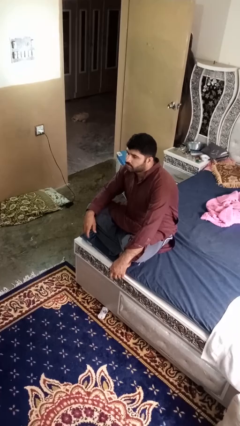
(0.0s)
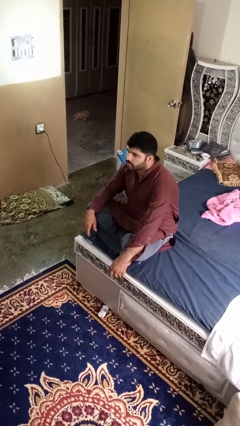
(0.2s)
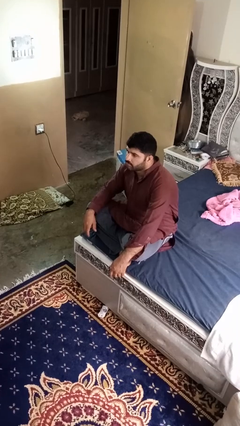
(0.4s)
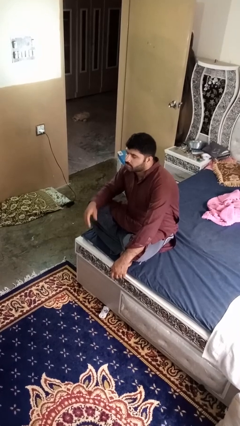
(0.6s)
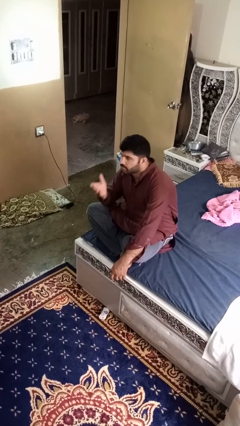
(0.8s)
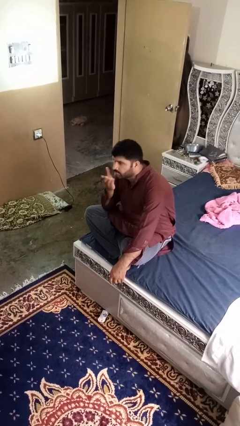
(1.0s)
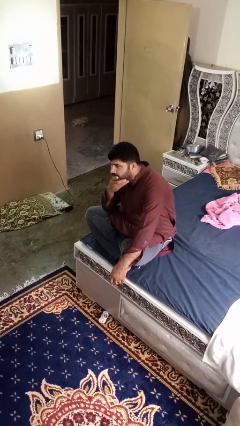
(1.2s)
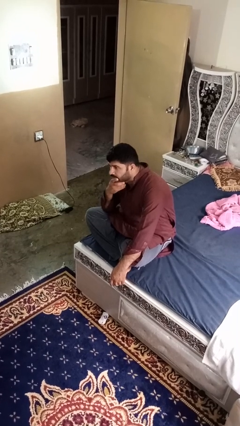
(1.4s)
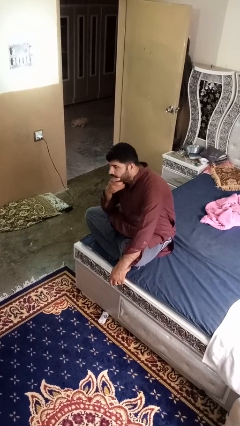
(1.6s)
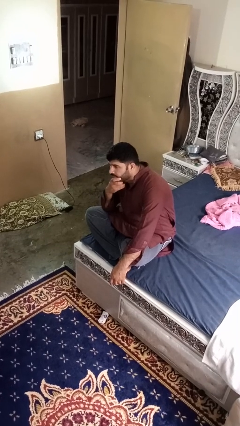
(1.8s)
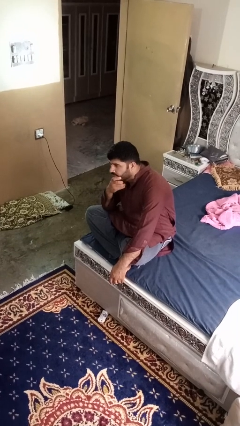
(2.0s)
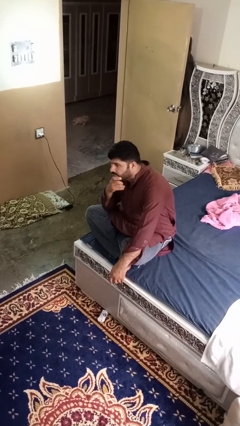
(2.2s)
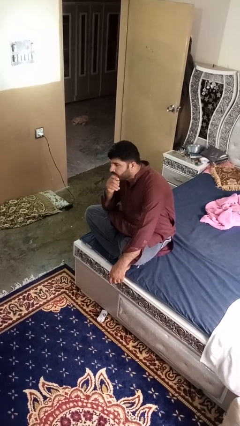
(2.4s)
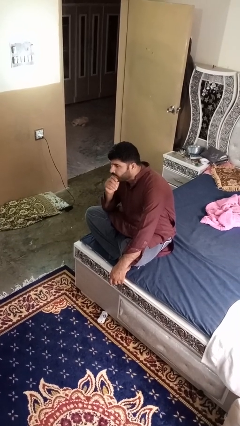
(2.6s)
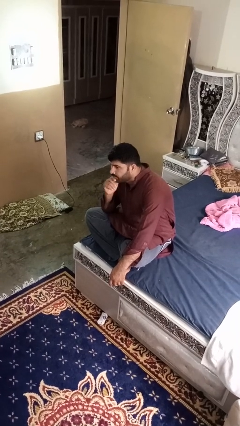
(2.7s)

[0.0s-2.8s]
person strokes chin

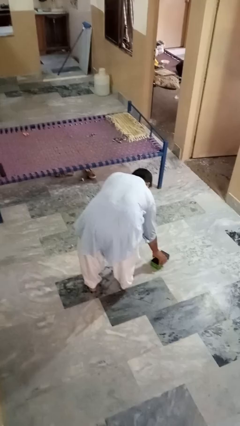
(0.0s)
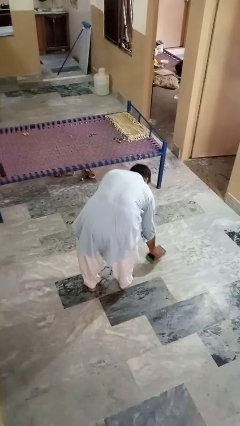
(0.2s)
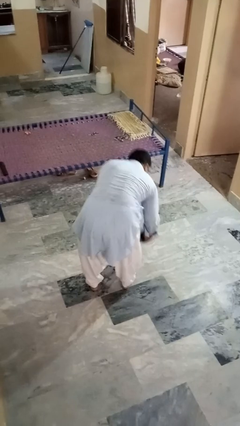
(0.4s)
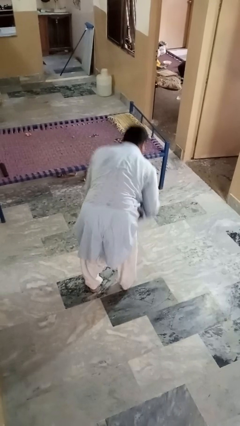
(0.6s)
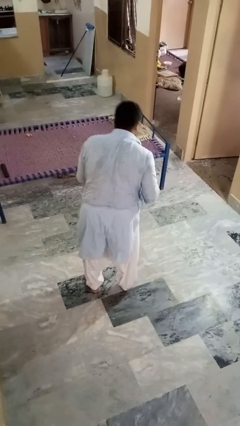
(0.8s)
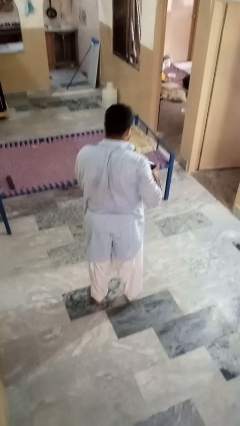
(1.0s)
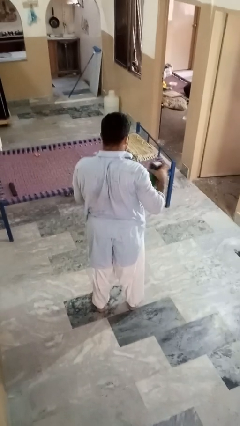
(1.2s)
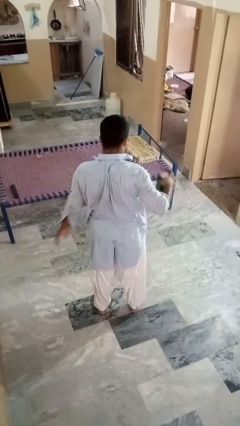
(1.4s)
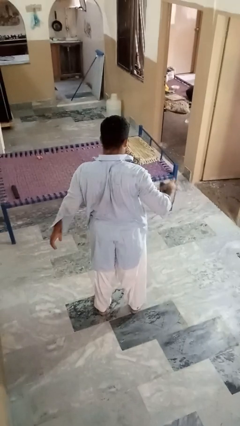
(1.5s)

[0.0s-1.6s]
person picks up object from floor

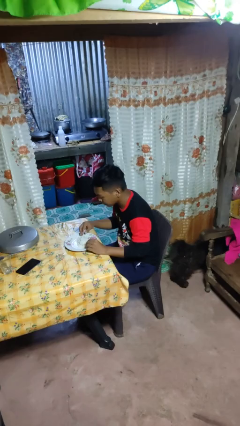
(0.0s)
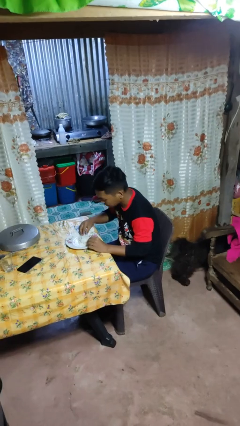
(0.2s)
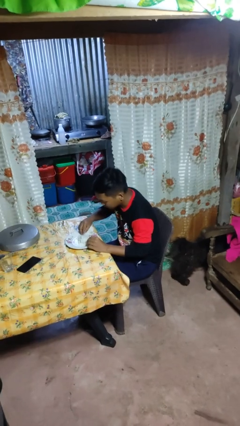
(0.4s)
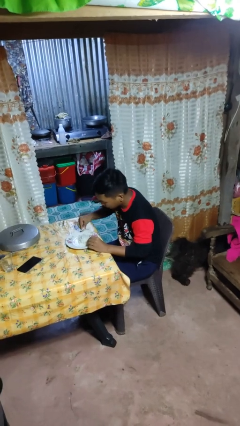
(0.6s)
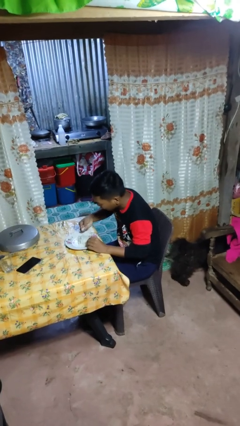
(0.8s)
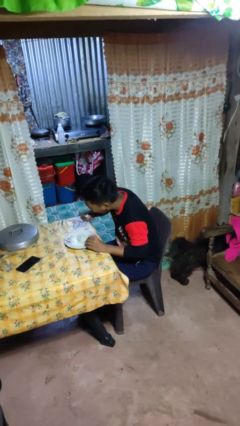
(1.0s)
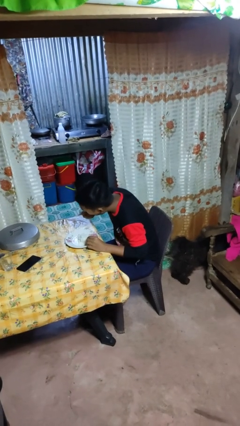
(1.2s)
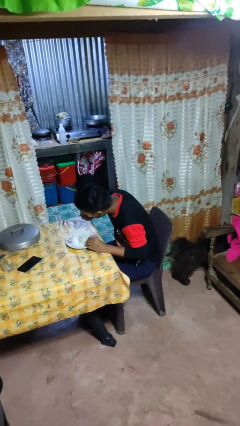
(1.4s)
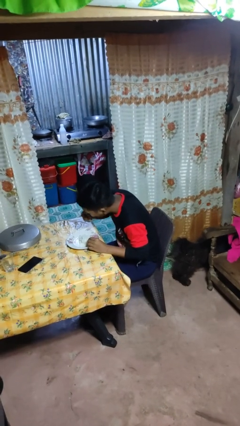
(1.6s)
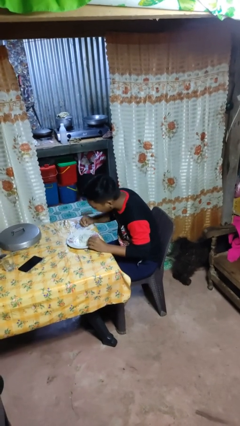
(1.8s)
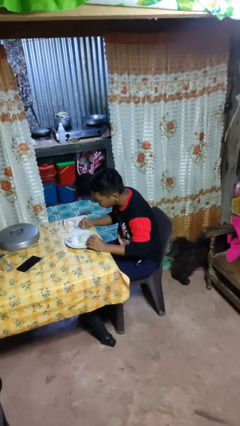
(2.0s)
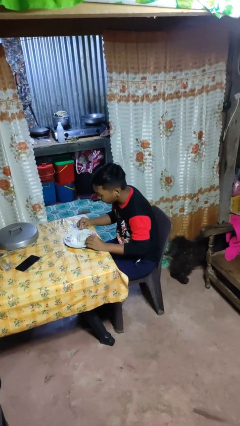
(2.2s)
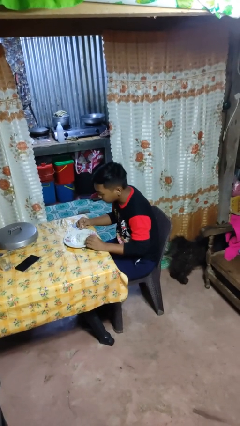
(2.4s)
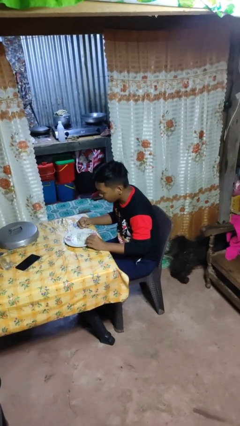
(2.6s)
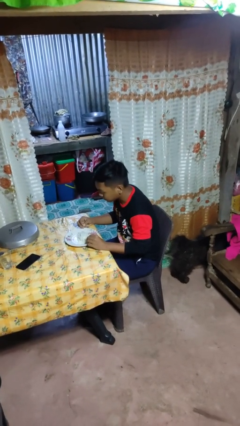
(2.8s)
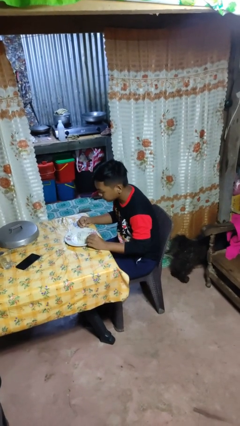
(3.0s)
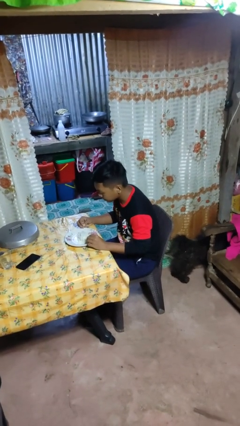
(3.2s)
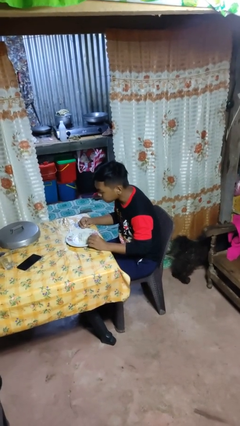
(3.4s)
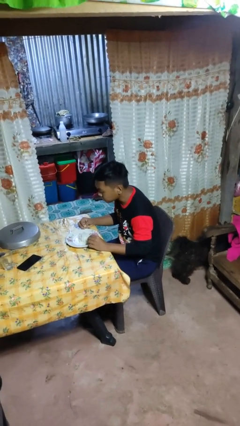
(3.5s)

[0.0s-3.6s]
person eats with hands

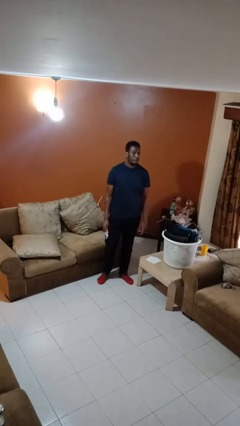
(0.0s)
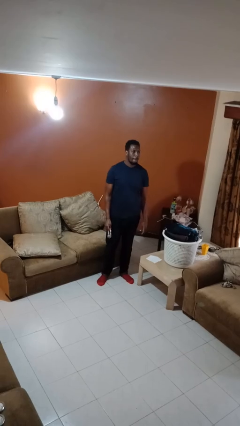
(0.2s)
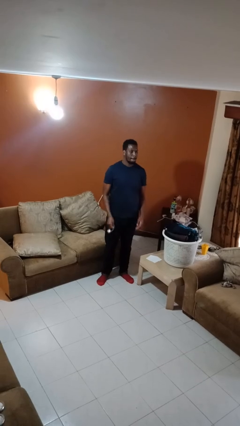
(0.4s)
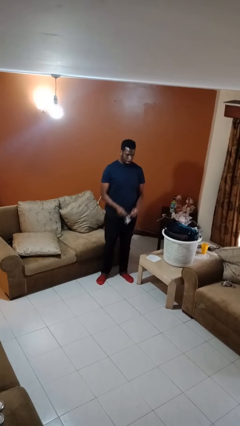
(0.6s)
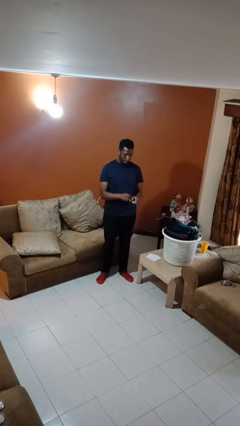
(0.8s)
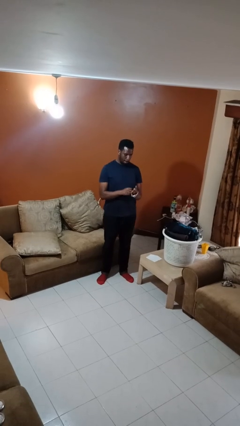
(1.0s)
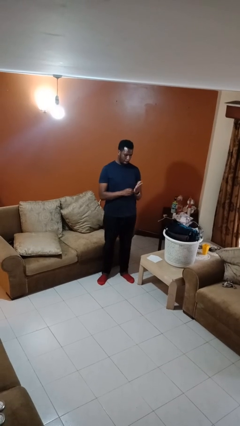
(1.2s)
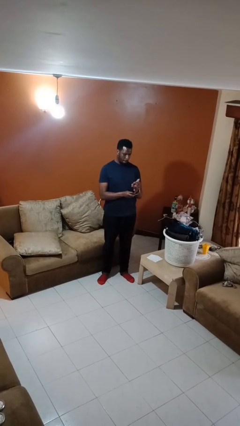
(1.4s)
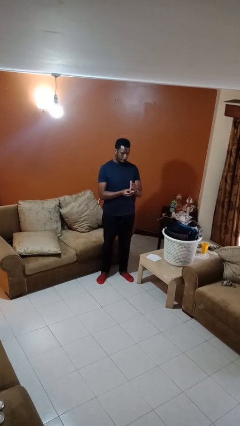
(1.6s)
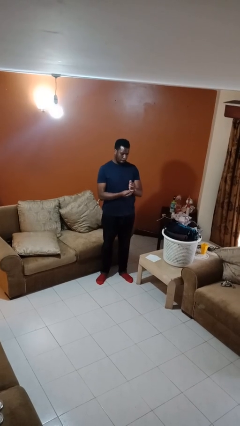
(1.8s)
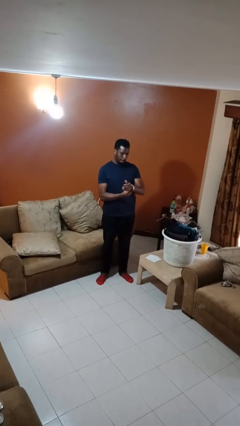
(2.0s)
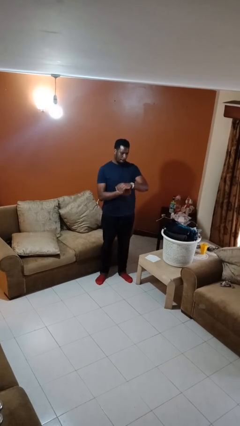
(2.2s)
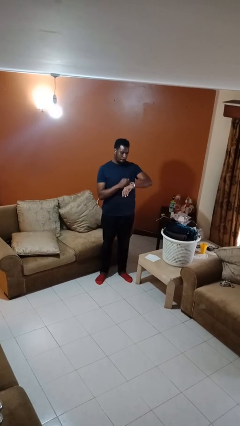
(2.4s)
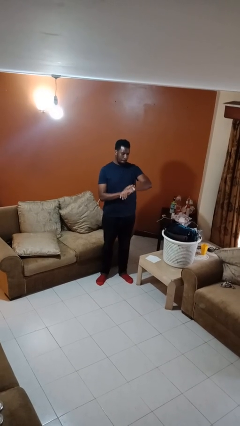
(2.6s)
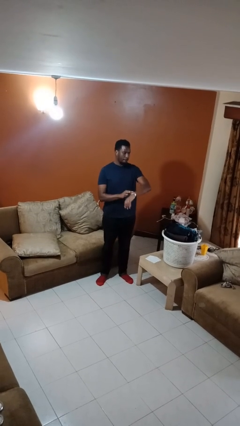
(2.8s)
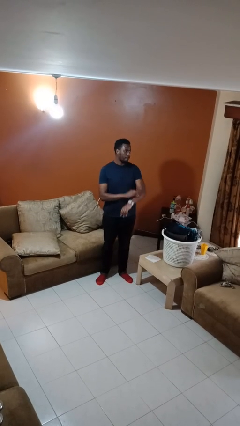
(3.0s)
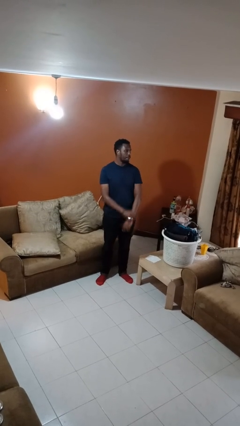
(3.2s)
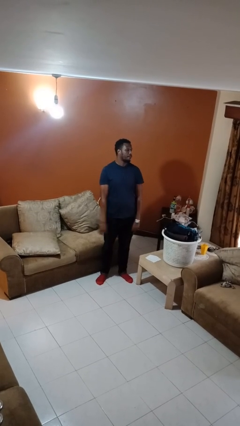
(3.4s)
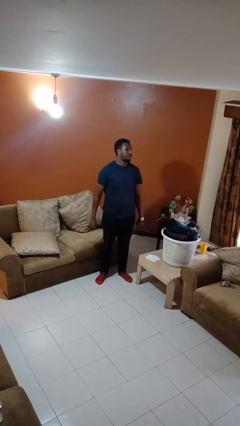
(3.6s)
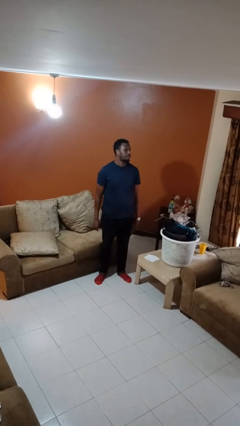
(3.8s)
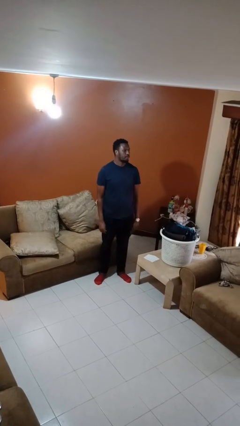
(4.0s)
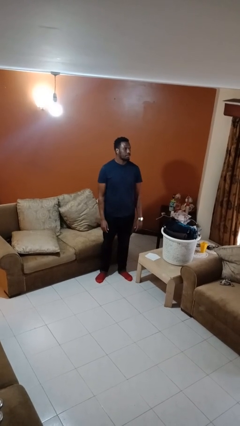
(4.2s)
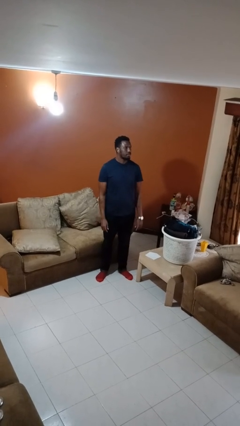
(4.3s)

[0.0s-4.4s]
person puts on wristwatch

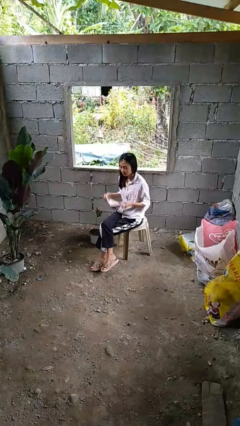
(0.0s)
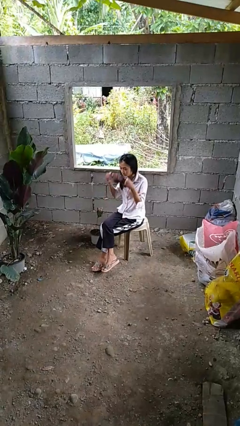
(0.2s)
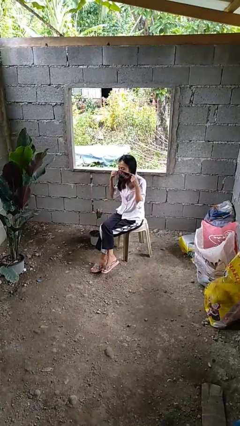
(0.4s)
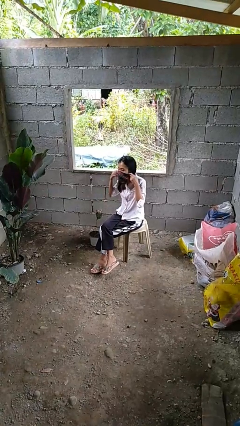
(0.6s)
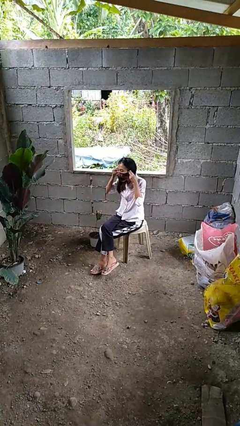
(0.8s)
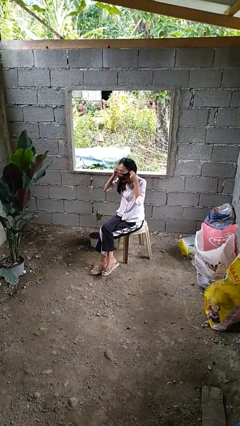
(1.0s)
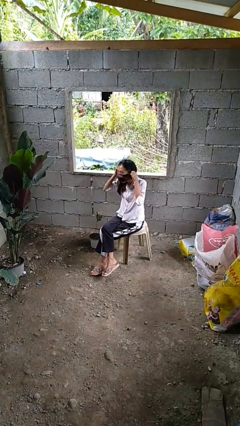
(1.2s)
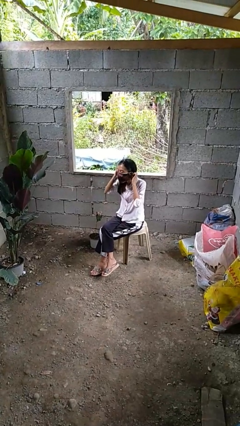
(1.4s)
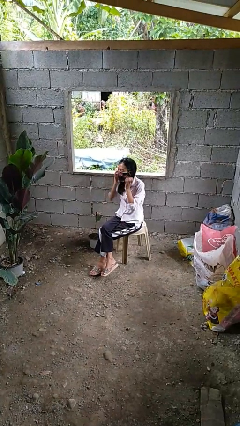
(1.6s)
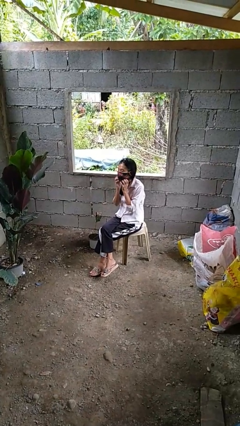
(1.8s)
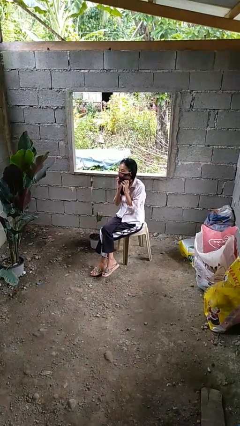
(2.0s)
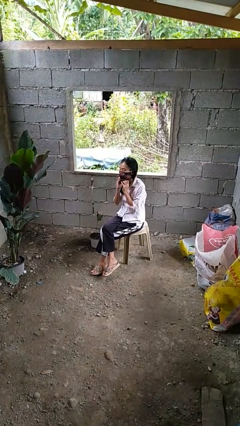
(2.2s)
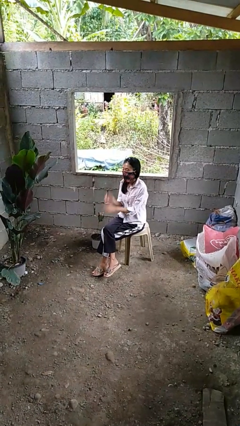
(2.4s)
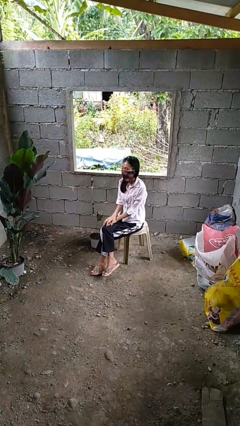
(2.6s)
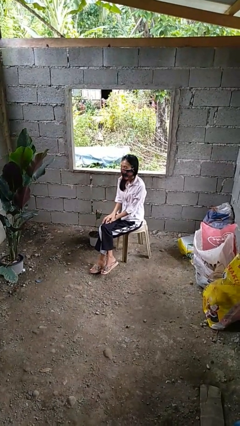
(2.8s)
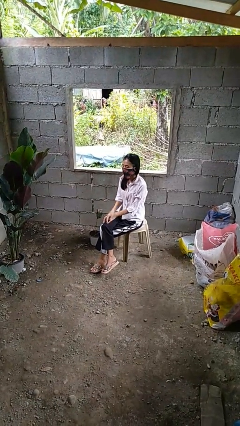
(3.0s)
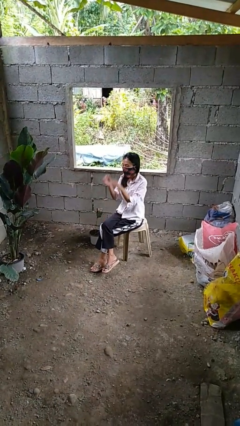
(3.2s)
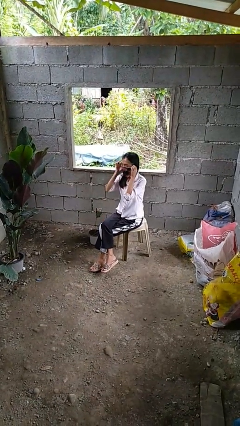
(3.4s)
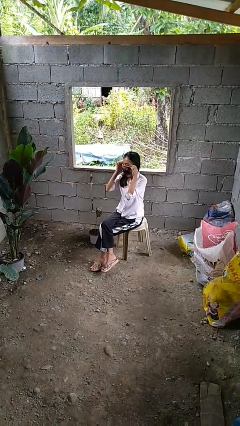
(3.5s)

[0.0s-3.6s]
person puts on facemask

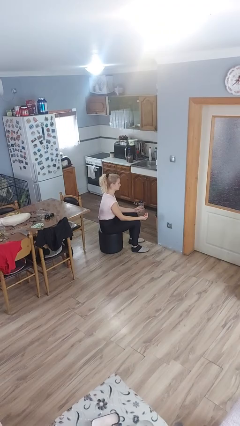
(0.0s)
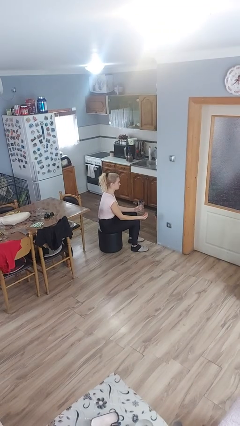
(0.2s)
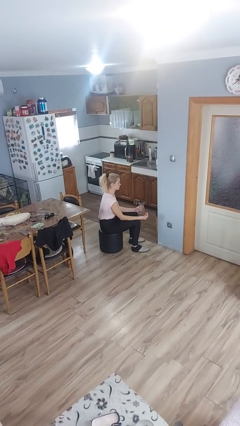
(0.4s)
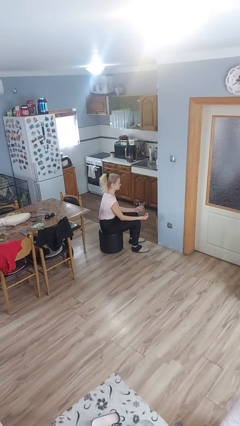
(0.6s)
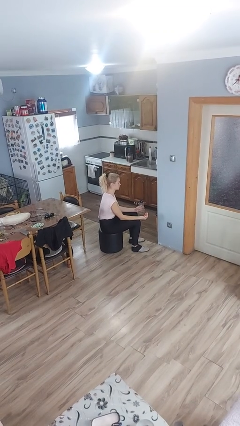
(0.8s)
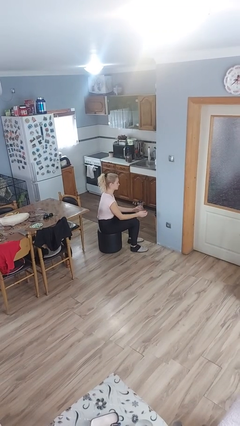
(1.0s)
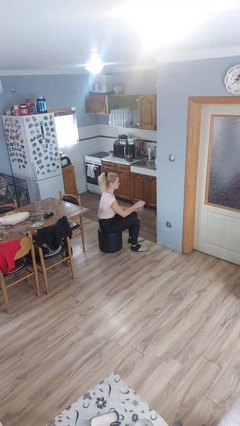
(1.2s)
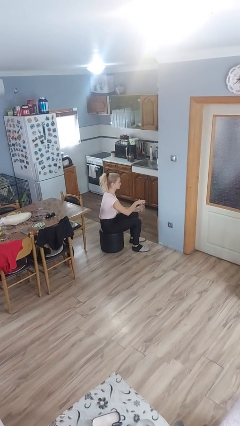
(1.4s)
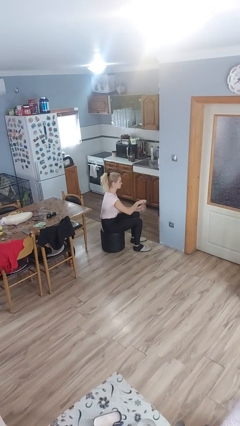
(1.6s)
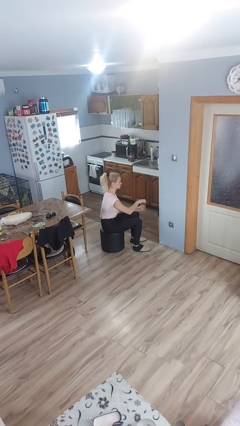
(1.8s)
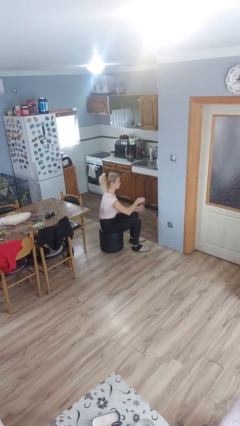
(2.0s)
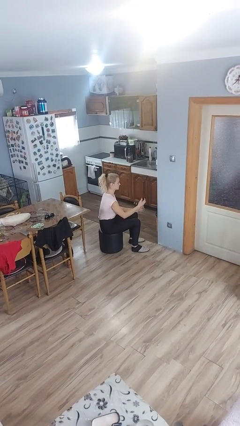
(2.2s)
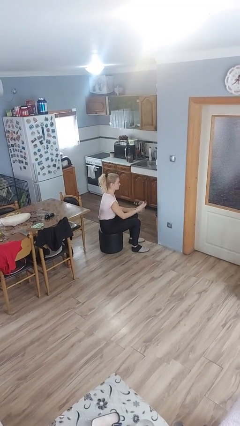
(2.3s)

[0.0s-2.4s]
person opens jar
